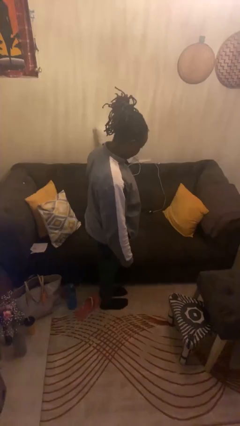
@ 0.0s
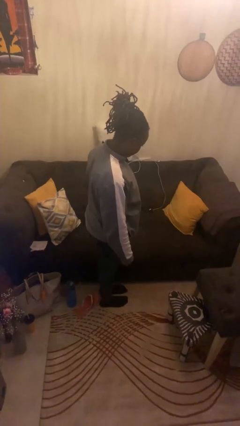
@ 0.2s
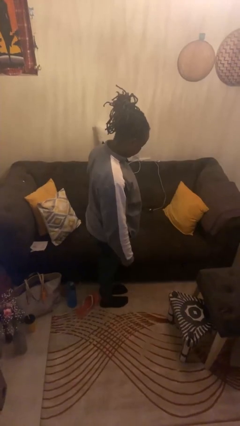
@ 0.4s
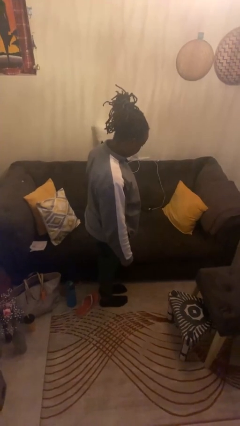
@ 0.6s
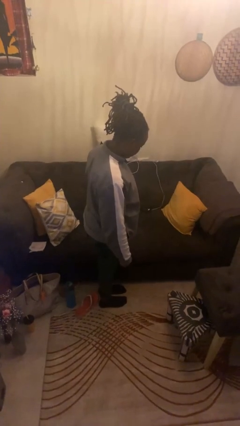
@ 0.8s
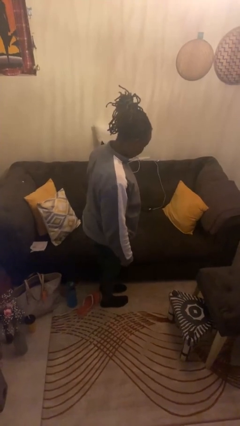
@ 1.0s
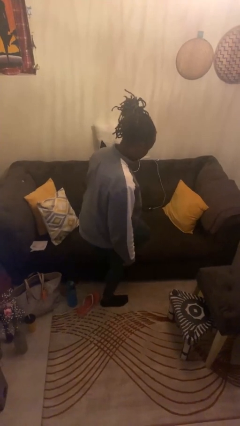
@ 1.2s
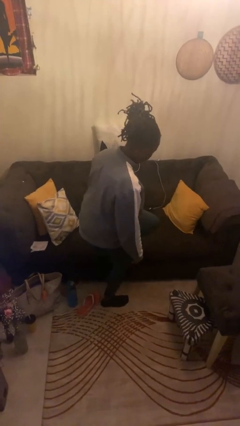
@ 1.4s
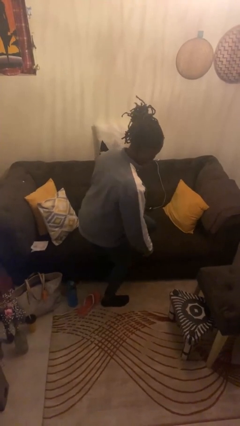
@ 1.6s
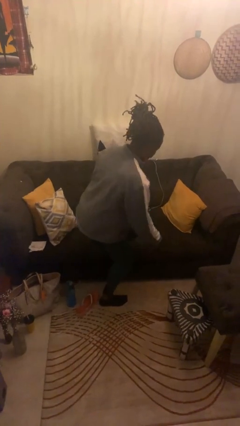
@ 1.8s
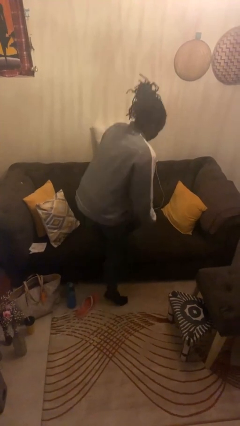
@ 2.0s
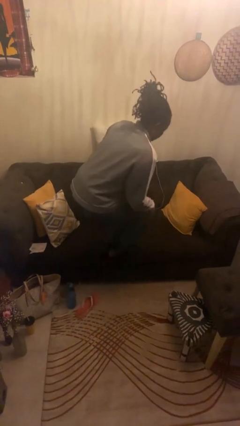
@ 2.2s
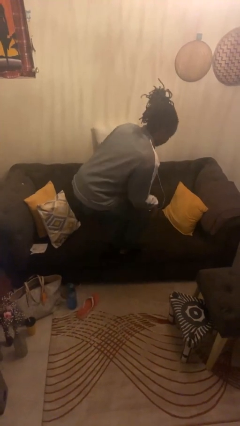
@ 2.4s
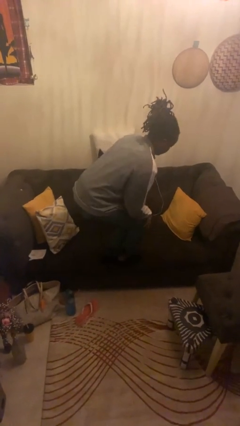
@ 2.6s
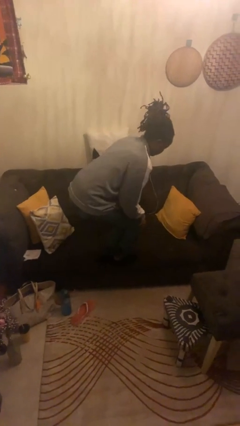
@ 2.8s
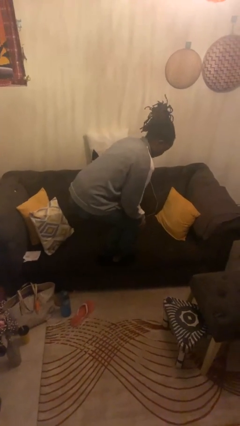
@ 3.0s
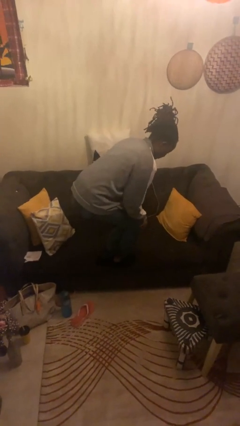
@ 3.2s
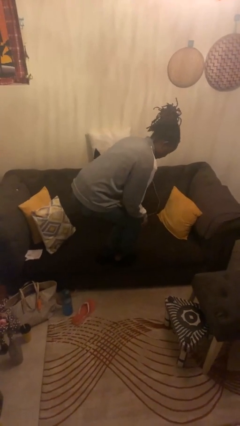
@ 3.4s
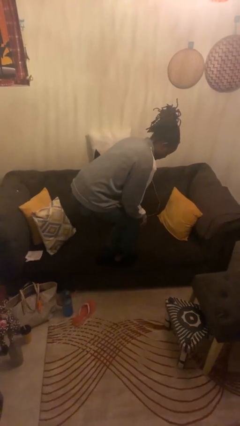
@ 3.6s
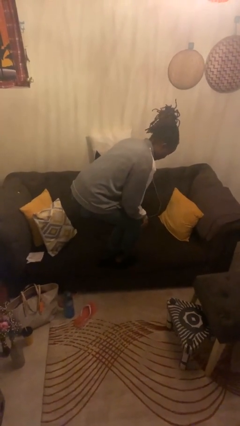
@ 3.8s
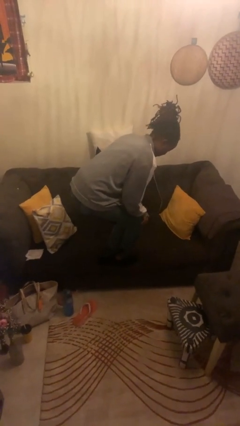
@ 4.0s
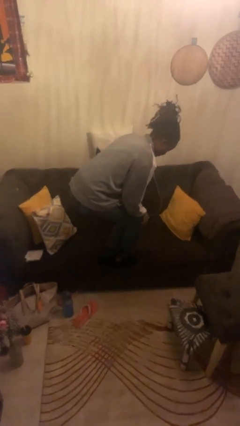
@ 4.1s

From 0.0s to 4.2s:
person climbs on chair

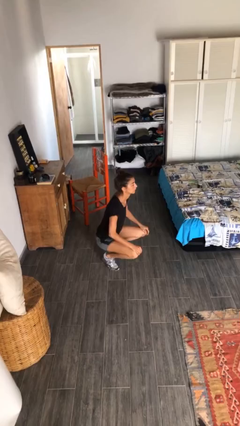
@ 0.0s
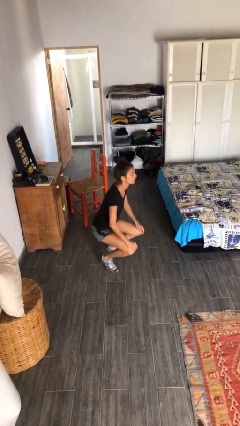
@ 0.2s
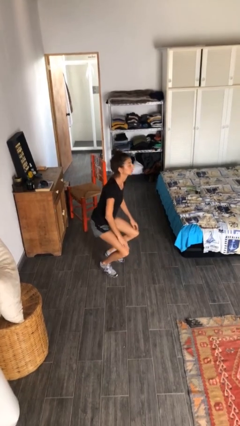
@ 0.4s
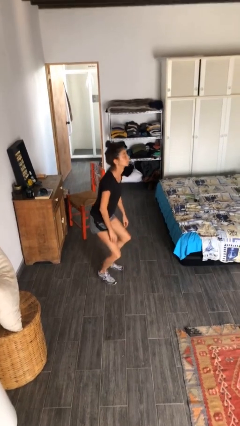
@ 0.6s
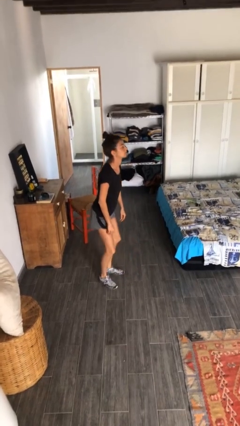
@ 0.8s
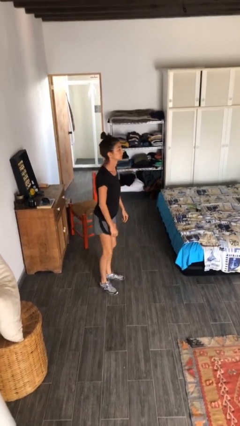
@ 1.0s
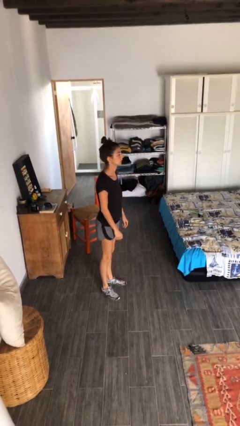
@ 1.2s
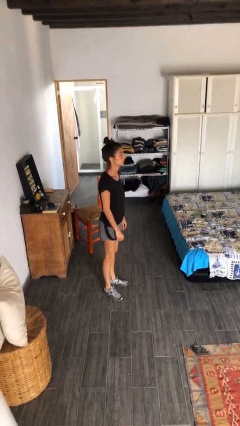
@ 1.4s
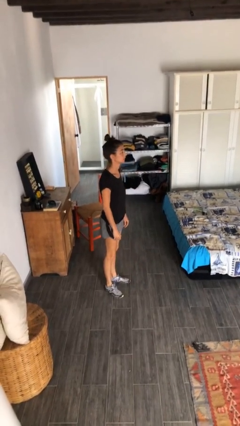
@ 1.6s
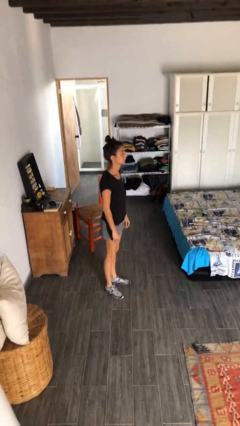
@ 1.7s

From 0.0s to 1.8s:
person stands up

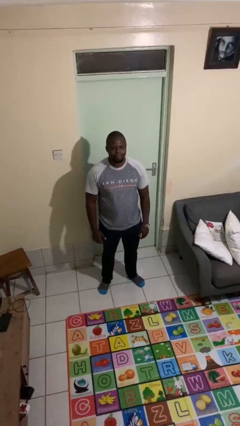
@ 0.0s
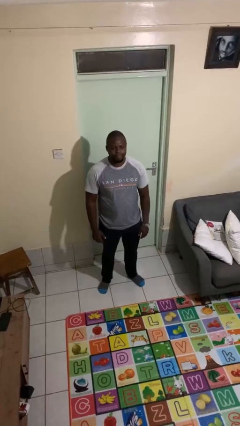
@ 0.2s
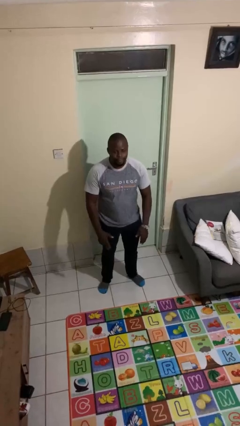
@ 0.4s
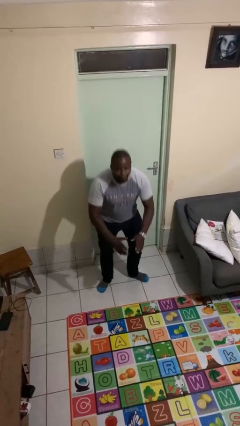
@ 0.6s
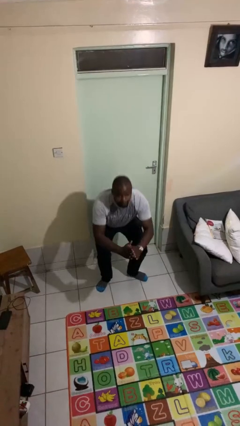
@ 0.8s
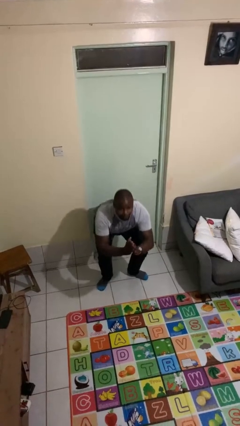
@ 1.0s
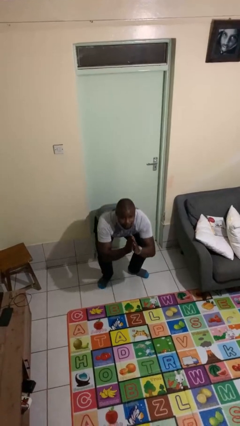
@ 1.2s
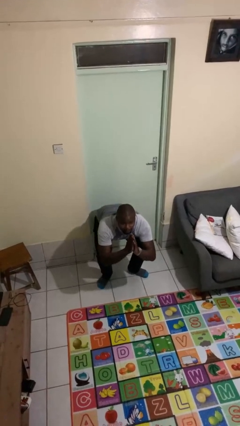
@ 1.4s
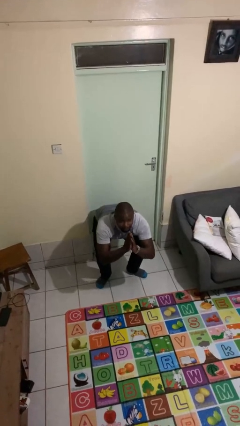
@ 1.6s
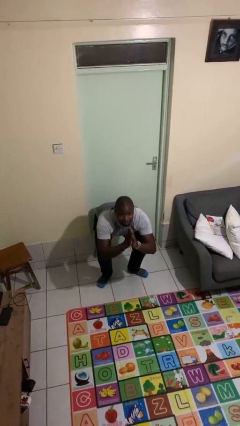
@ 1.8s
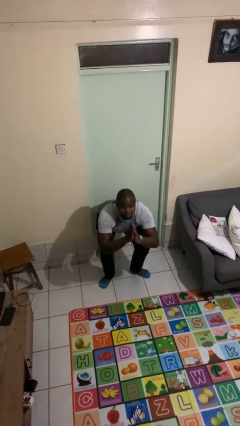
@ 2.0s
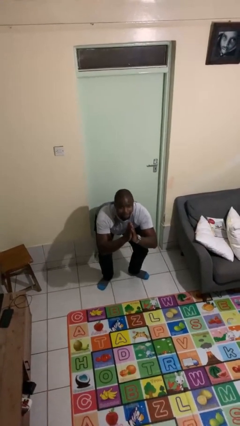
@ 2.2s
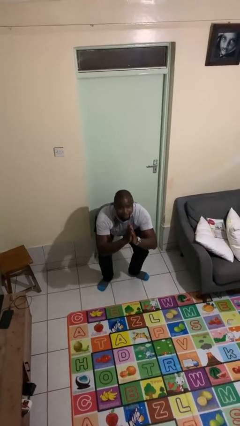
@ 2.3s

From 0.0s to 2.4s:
person squats

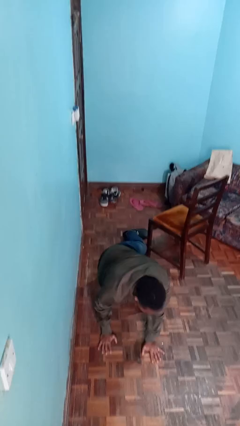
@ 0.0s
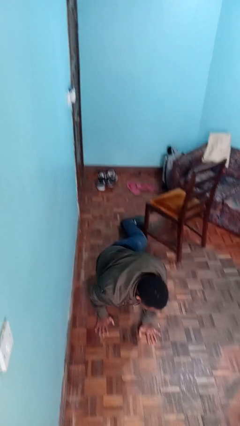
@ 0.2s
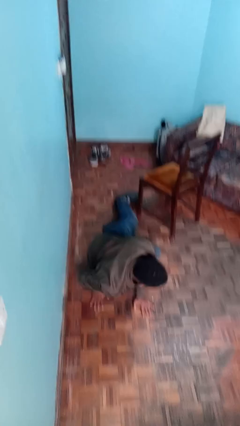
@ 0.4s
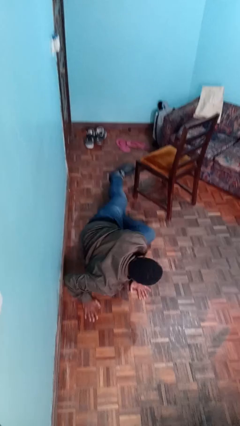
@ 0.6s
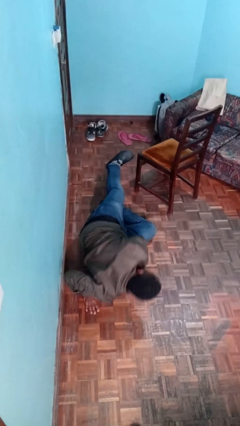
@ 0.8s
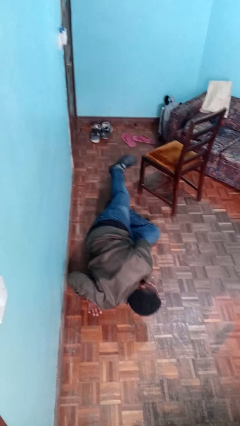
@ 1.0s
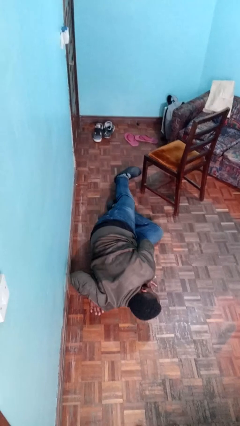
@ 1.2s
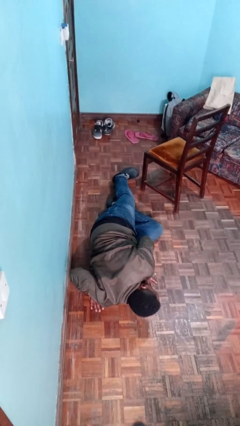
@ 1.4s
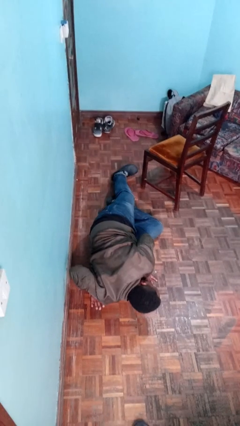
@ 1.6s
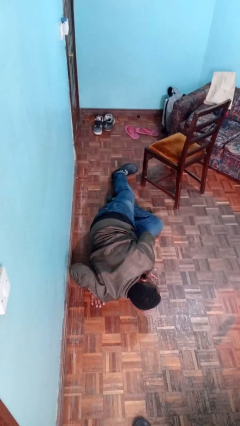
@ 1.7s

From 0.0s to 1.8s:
person lies down on floor

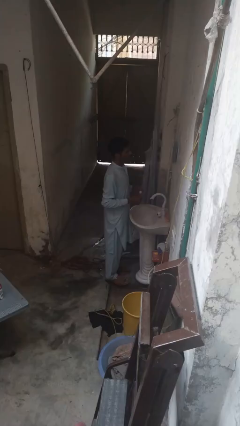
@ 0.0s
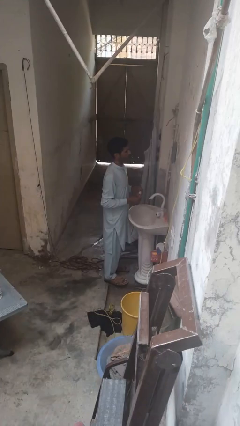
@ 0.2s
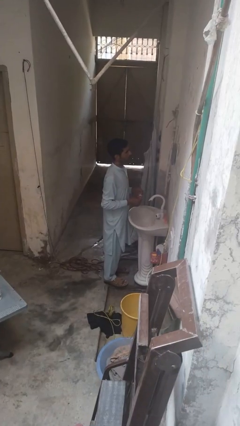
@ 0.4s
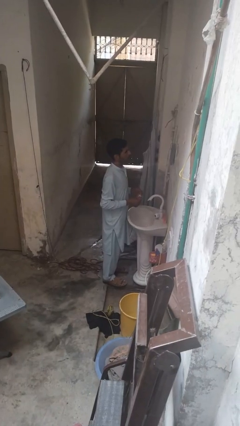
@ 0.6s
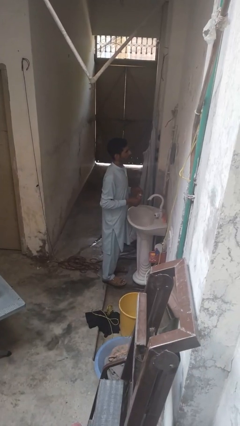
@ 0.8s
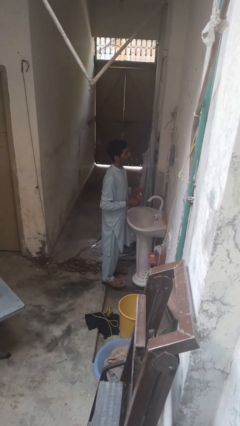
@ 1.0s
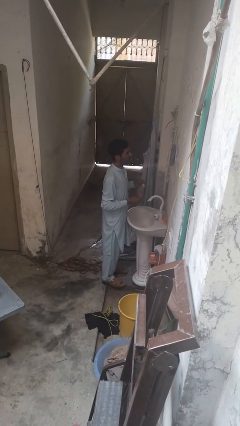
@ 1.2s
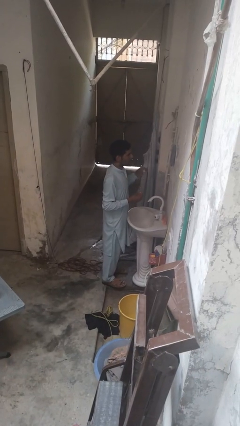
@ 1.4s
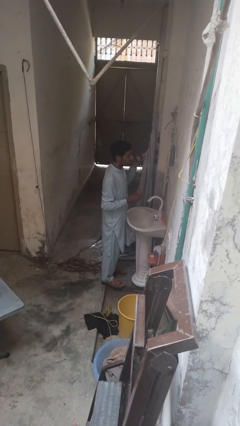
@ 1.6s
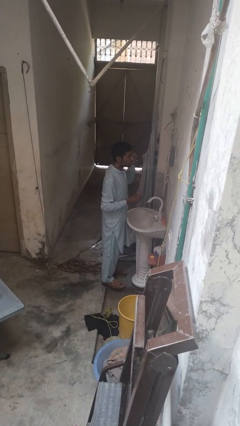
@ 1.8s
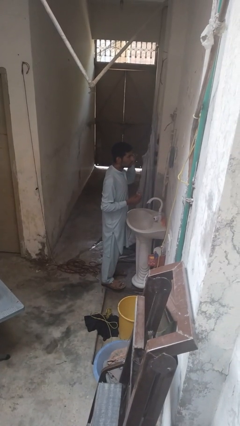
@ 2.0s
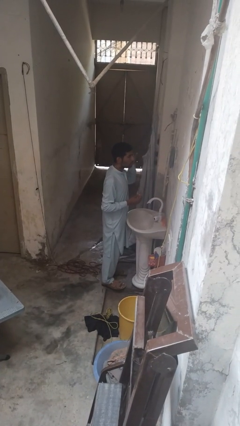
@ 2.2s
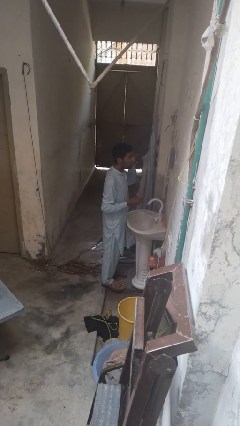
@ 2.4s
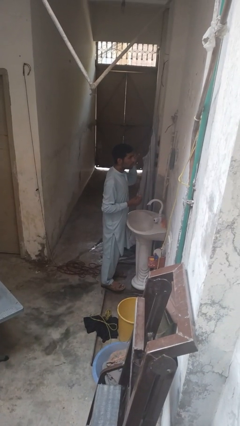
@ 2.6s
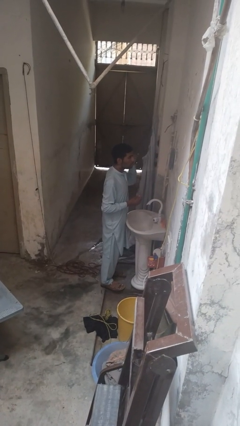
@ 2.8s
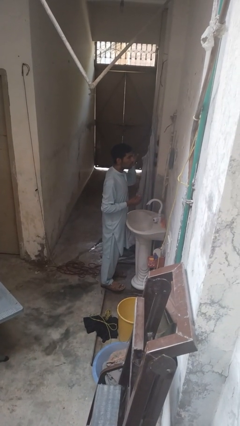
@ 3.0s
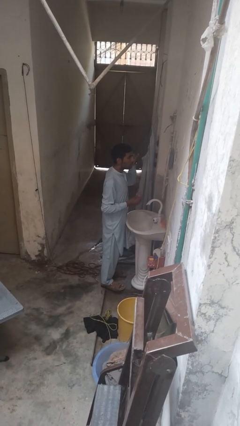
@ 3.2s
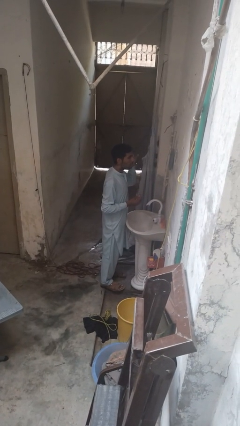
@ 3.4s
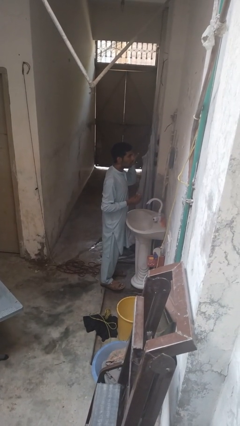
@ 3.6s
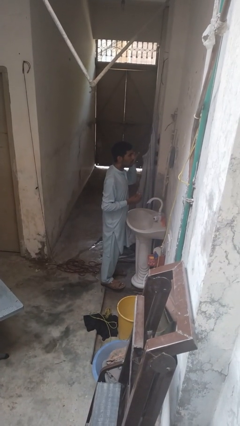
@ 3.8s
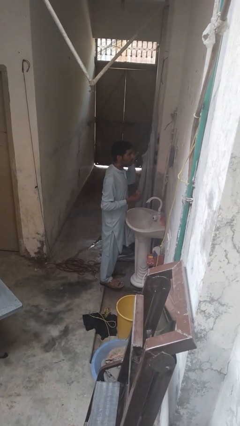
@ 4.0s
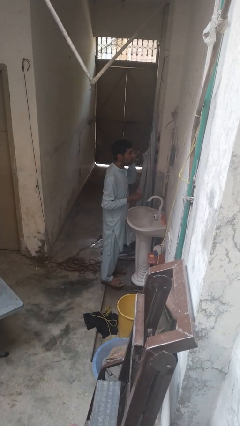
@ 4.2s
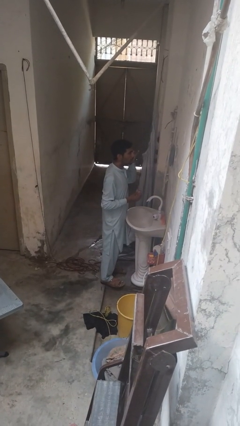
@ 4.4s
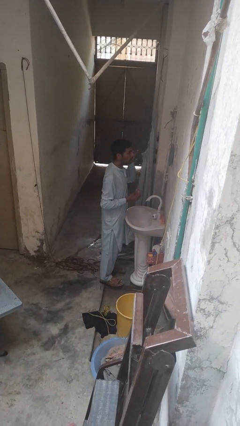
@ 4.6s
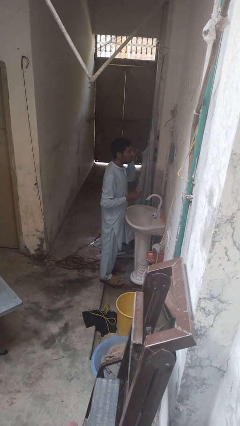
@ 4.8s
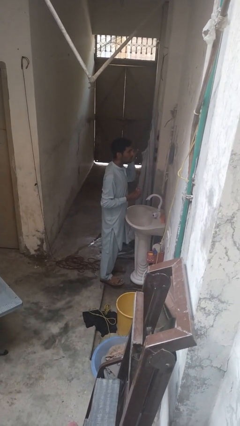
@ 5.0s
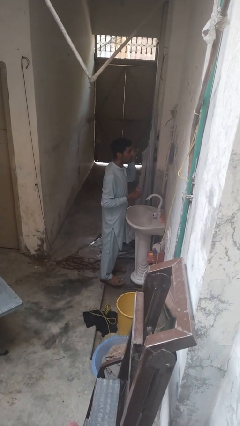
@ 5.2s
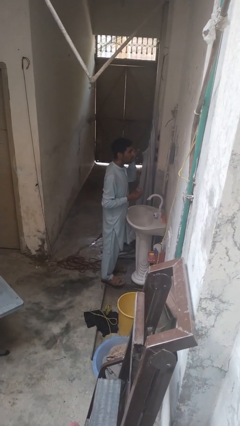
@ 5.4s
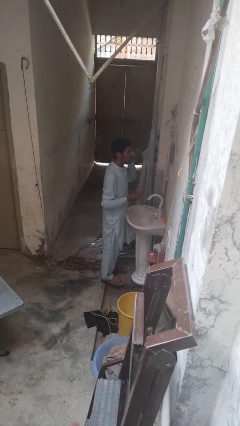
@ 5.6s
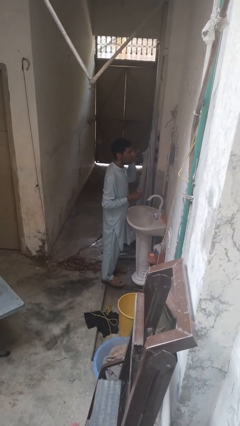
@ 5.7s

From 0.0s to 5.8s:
person applies eye makeup

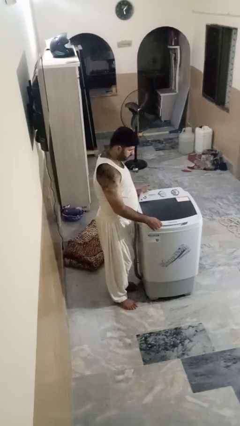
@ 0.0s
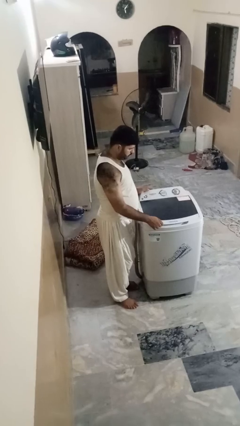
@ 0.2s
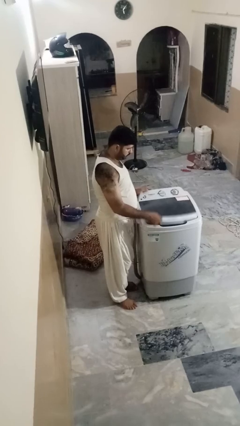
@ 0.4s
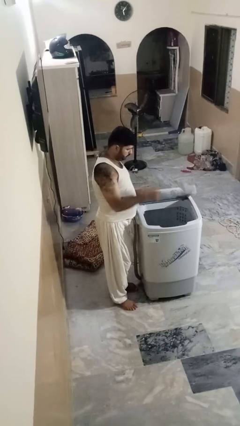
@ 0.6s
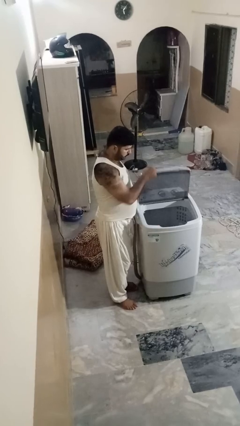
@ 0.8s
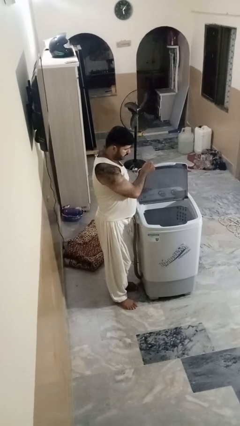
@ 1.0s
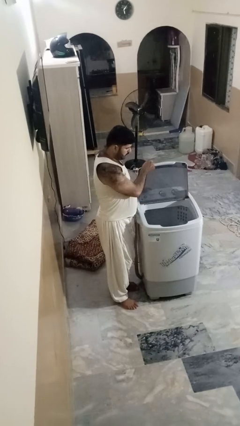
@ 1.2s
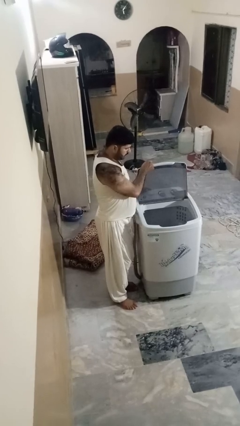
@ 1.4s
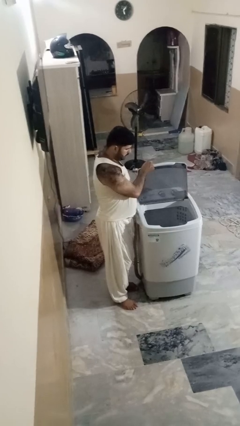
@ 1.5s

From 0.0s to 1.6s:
person opens clothes washer
